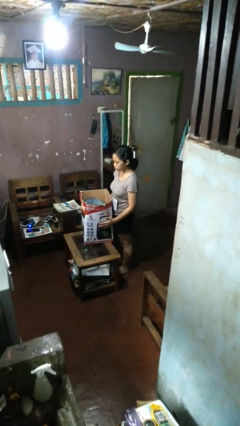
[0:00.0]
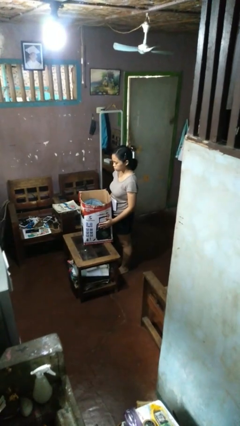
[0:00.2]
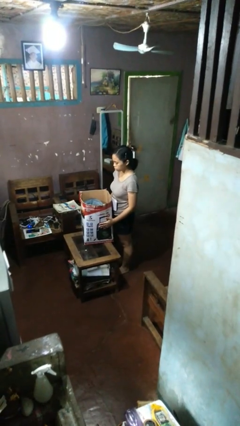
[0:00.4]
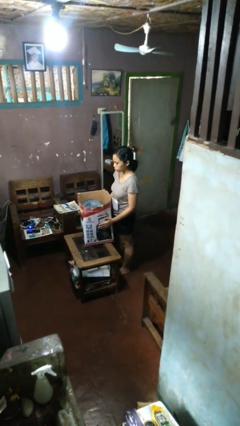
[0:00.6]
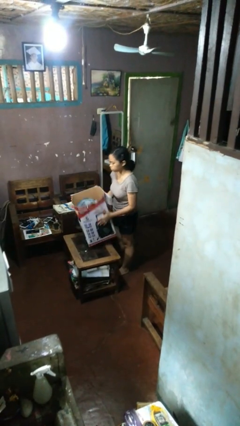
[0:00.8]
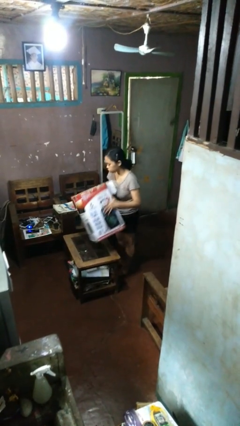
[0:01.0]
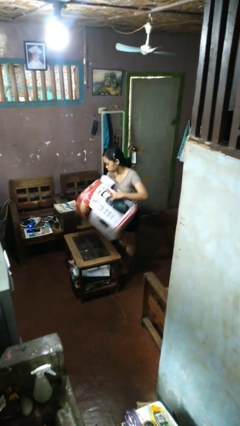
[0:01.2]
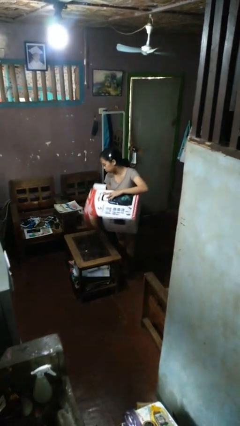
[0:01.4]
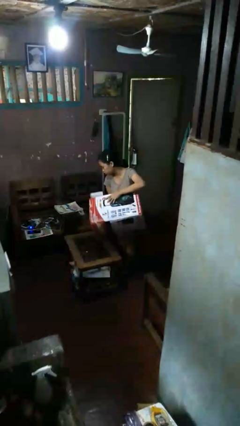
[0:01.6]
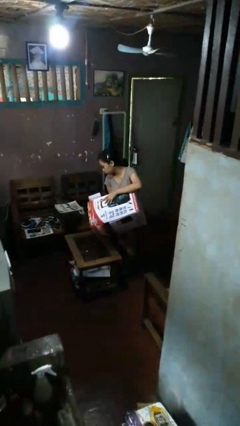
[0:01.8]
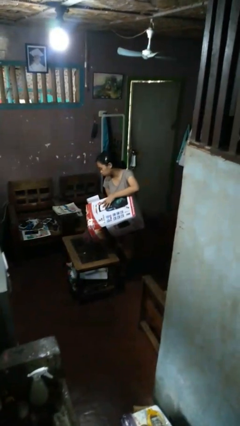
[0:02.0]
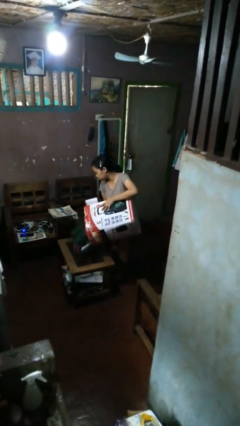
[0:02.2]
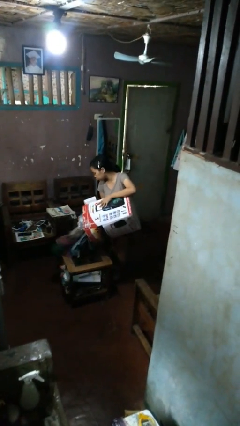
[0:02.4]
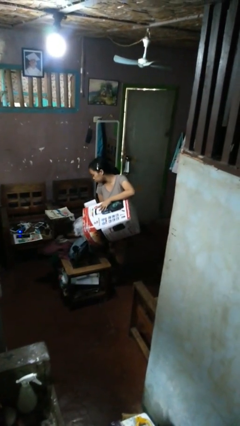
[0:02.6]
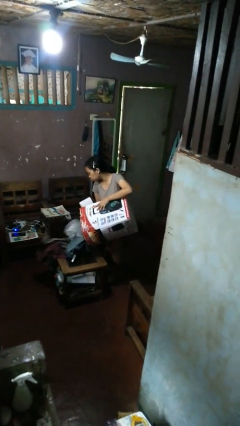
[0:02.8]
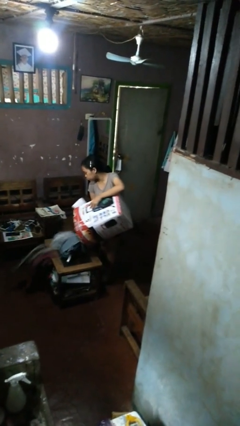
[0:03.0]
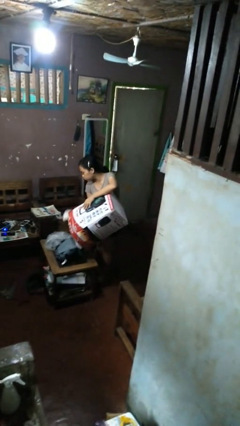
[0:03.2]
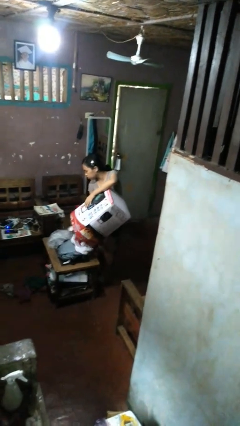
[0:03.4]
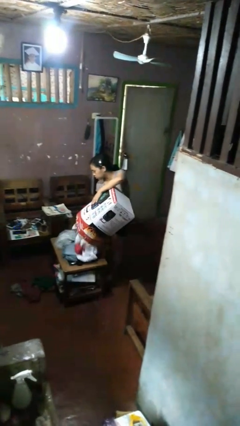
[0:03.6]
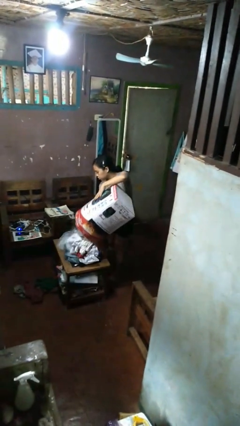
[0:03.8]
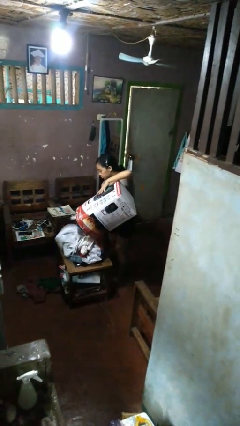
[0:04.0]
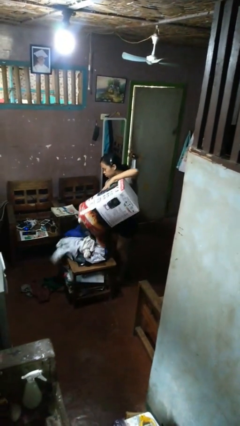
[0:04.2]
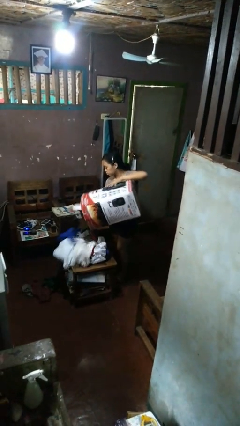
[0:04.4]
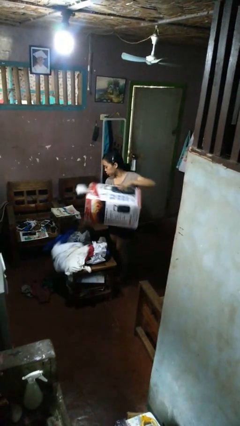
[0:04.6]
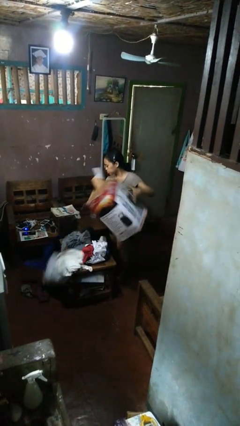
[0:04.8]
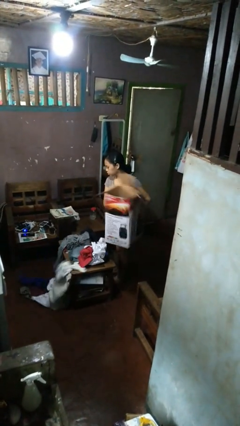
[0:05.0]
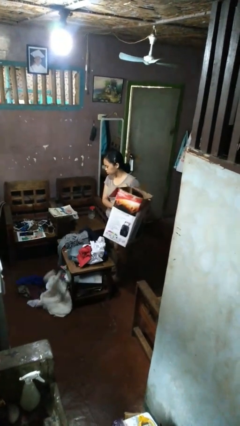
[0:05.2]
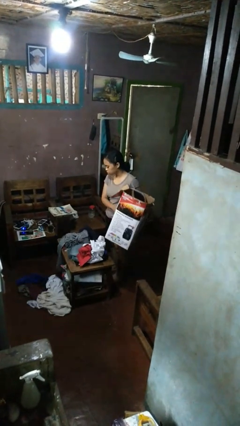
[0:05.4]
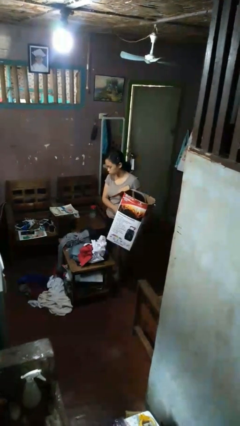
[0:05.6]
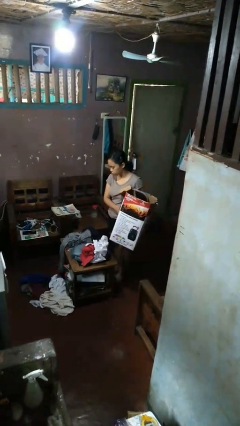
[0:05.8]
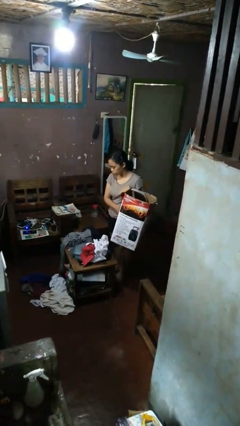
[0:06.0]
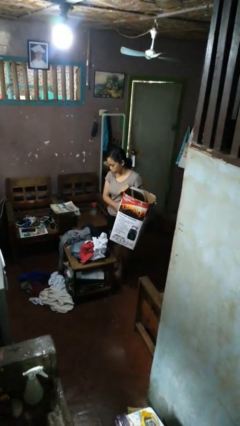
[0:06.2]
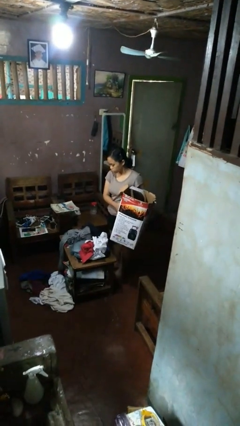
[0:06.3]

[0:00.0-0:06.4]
person unloads box onto table

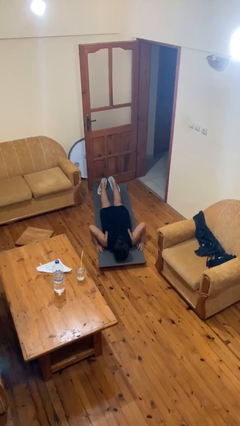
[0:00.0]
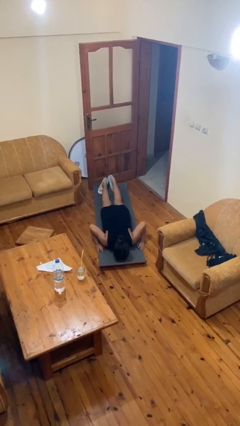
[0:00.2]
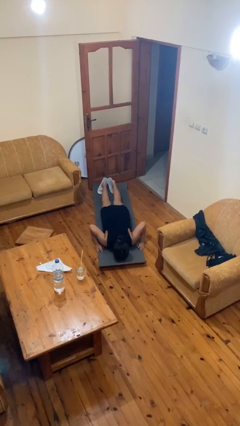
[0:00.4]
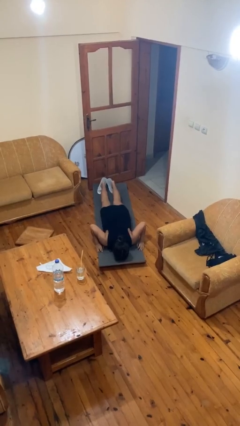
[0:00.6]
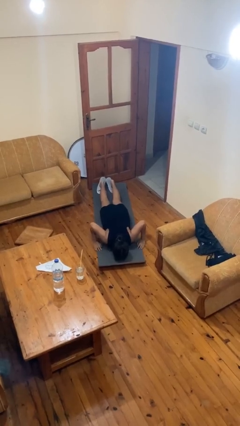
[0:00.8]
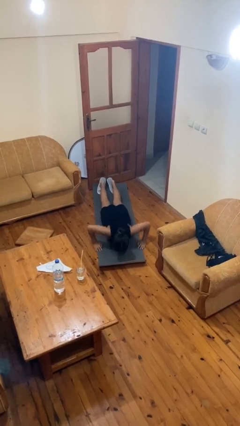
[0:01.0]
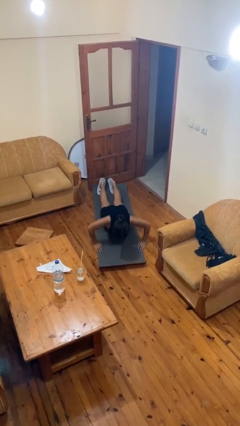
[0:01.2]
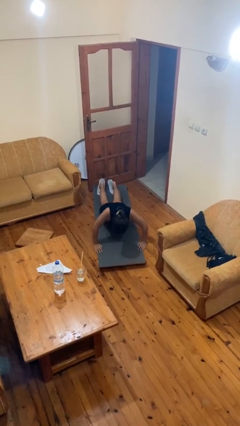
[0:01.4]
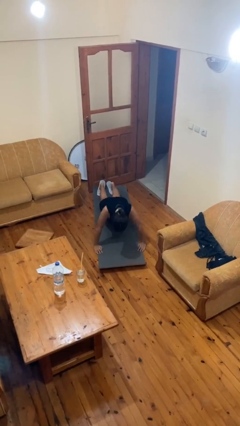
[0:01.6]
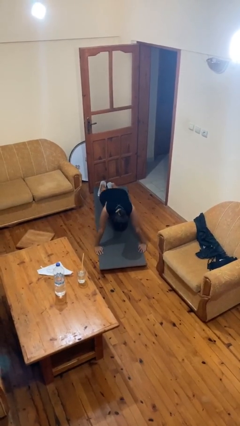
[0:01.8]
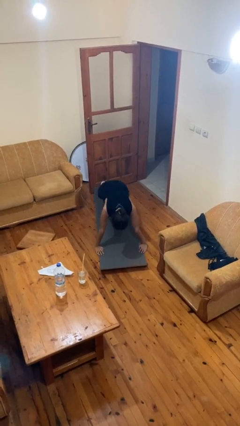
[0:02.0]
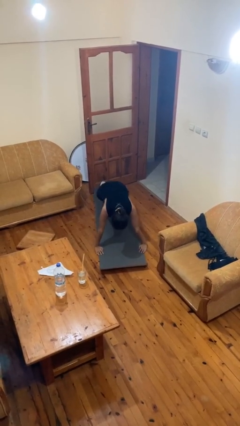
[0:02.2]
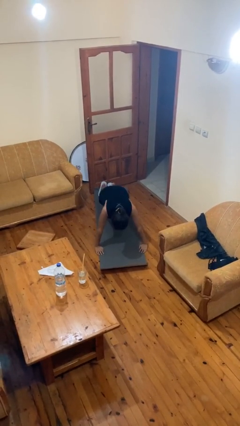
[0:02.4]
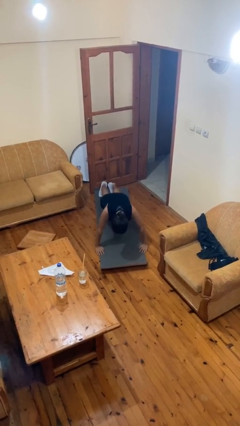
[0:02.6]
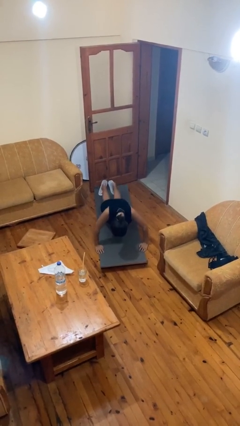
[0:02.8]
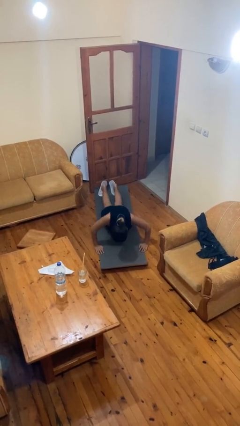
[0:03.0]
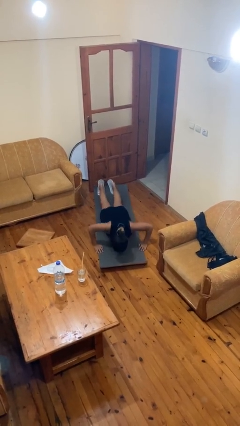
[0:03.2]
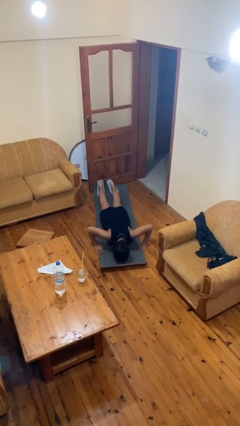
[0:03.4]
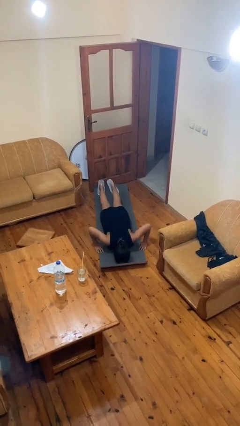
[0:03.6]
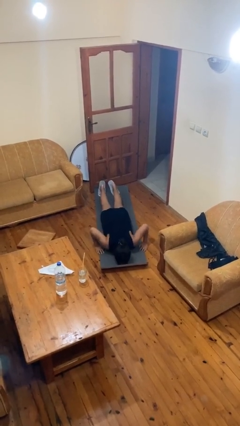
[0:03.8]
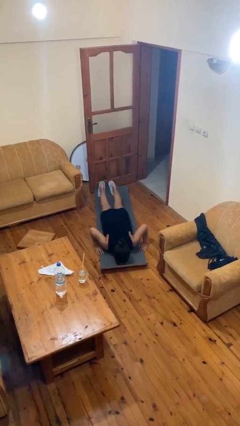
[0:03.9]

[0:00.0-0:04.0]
person exercises with pushup

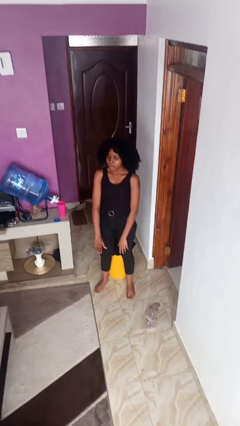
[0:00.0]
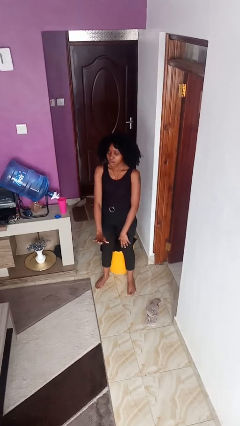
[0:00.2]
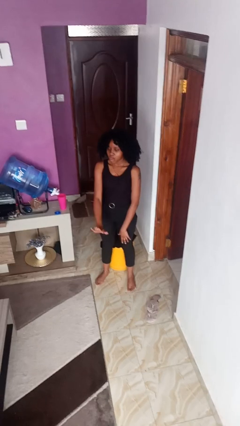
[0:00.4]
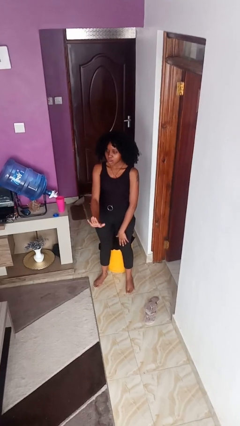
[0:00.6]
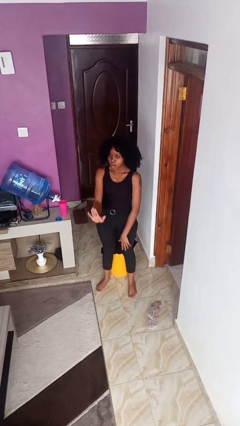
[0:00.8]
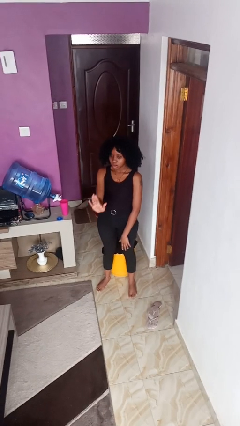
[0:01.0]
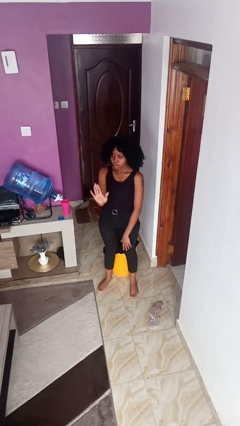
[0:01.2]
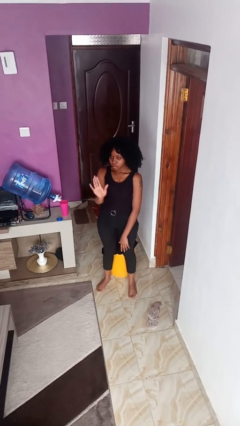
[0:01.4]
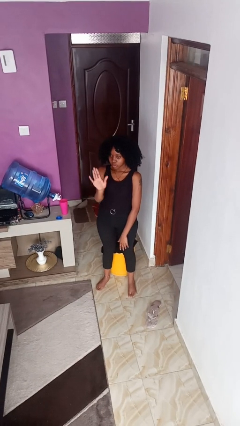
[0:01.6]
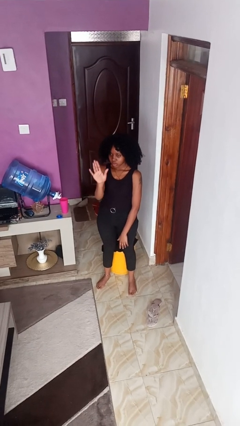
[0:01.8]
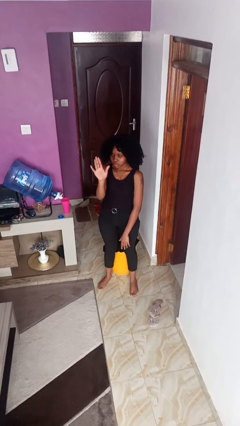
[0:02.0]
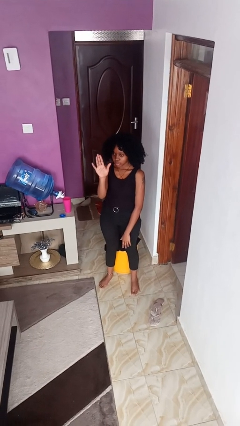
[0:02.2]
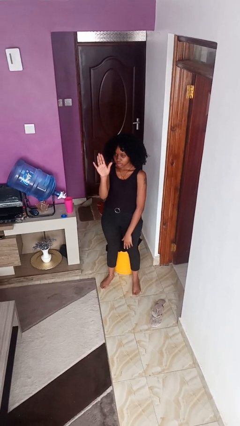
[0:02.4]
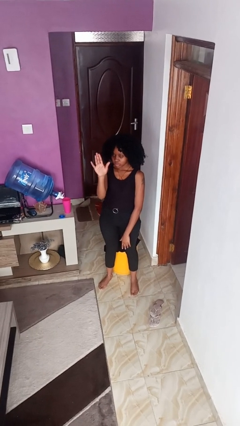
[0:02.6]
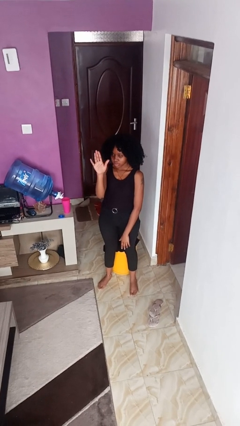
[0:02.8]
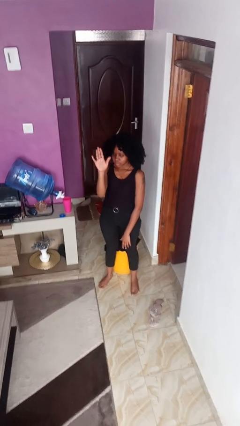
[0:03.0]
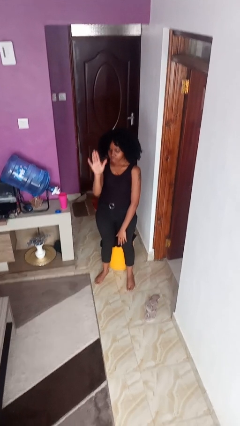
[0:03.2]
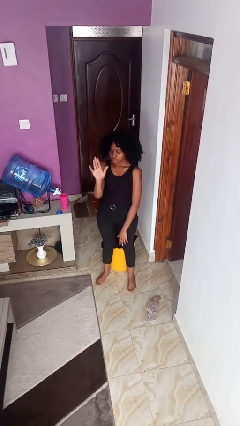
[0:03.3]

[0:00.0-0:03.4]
person gestures swipe up

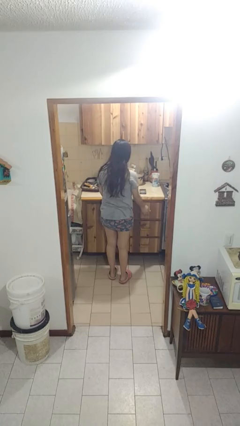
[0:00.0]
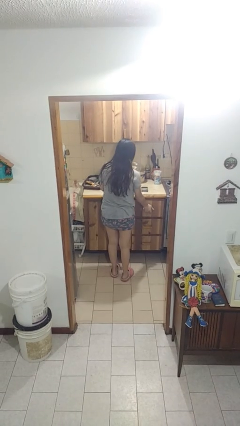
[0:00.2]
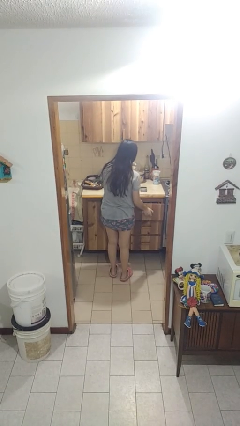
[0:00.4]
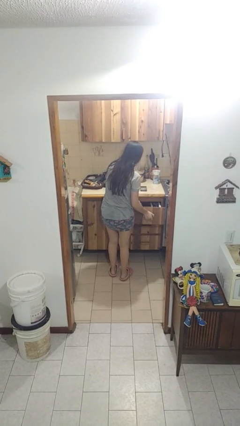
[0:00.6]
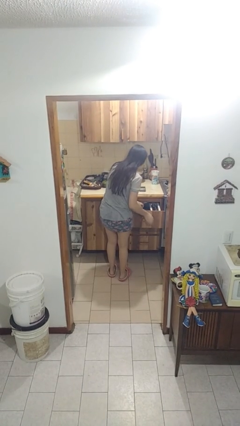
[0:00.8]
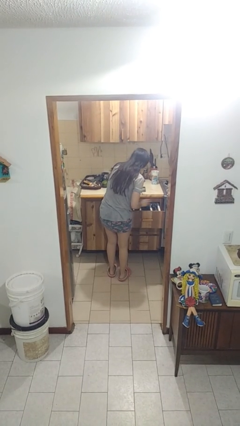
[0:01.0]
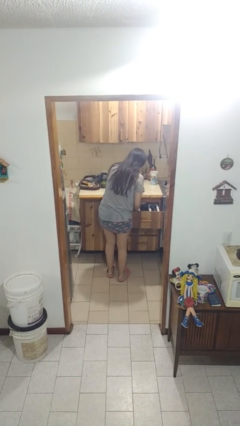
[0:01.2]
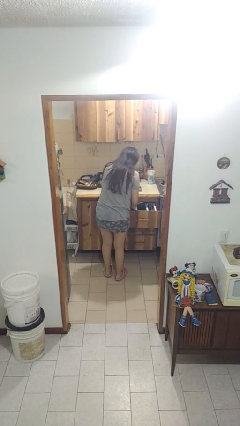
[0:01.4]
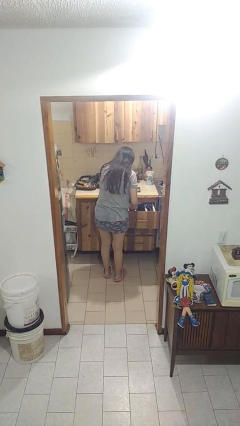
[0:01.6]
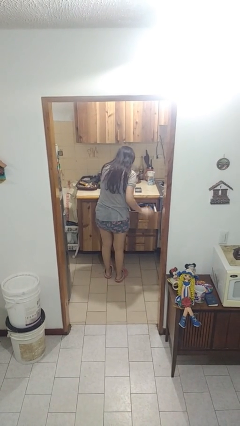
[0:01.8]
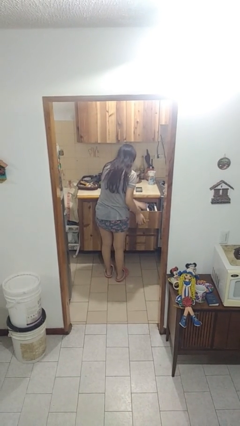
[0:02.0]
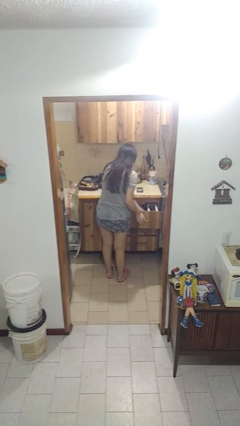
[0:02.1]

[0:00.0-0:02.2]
person searches in kitchen drawer

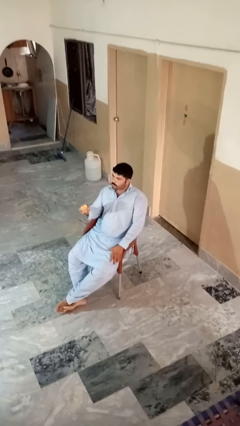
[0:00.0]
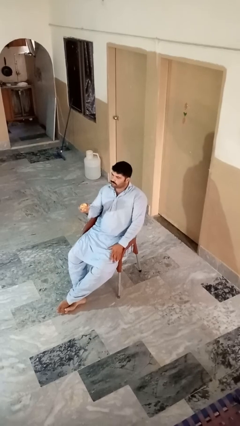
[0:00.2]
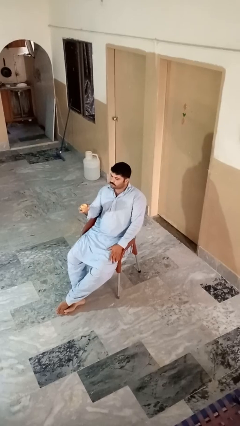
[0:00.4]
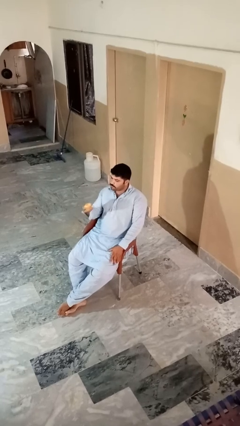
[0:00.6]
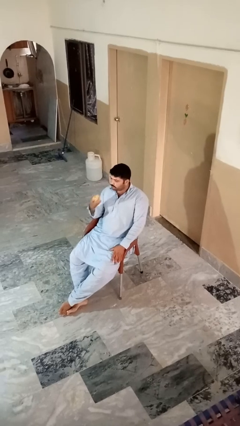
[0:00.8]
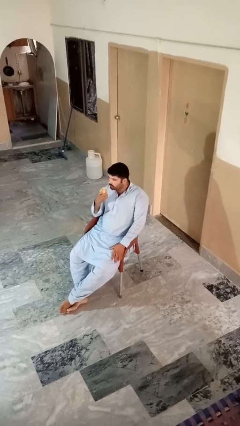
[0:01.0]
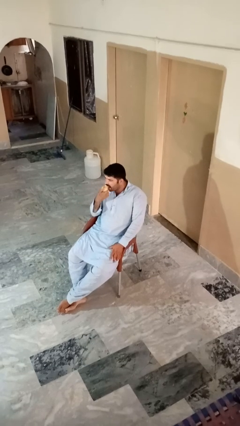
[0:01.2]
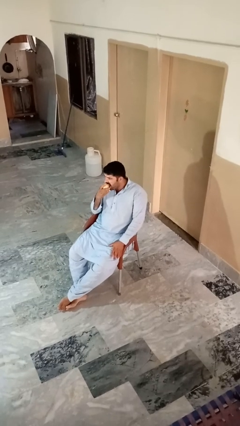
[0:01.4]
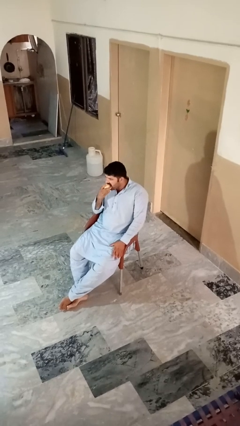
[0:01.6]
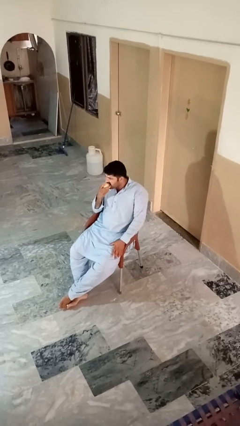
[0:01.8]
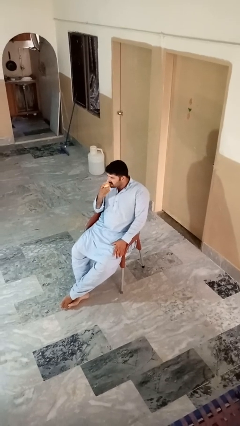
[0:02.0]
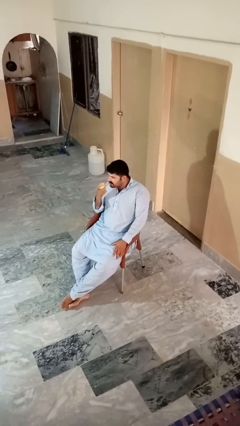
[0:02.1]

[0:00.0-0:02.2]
person eats apple
